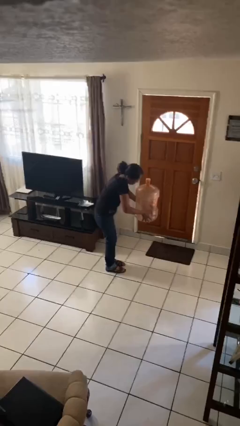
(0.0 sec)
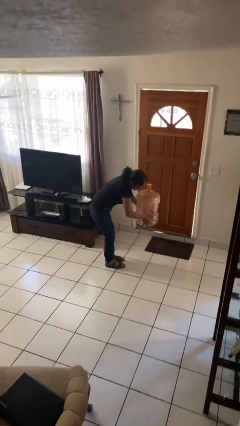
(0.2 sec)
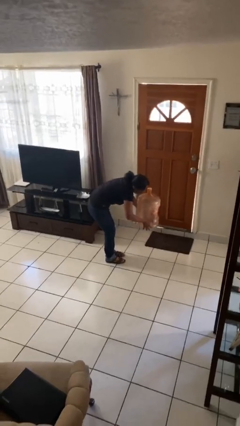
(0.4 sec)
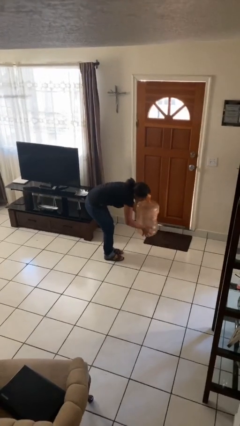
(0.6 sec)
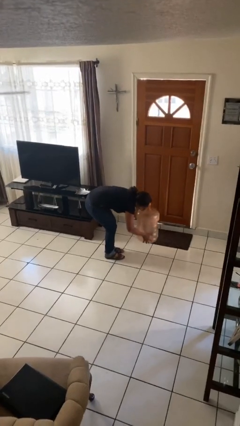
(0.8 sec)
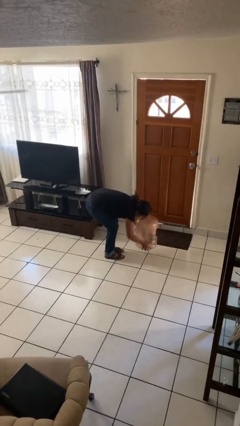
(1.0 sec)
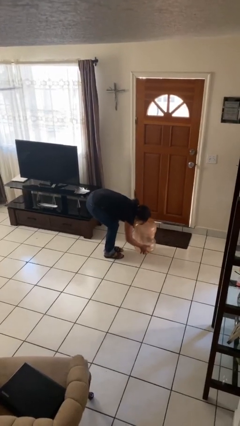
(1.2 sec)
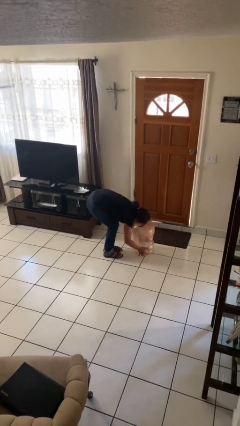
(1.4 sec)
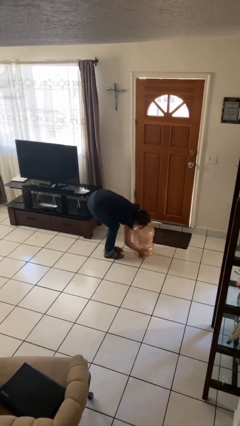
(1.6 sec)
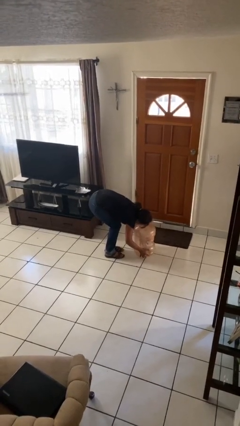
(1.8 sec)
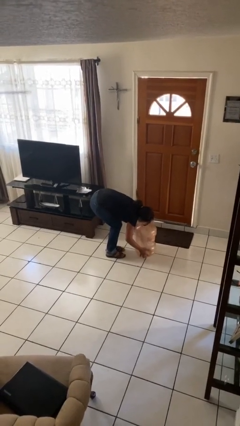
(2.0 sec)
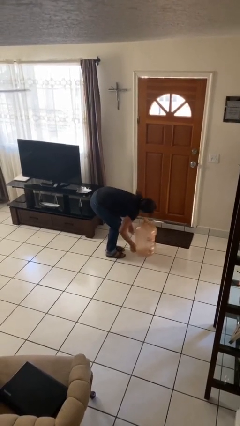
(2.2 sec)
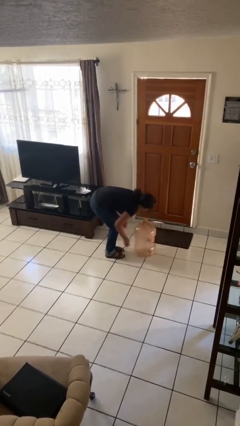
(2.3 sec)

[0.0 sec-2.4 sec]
person puts down object on floor

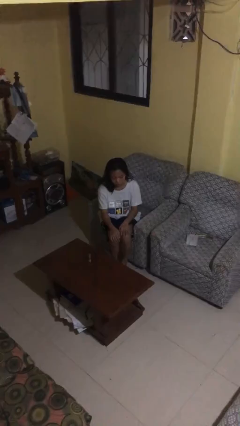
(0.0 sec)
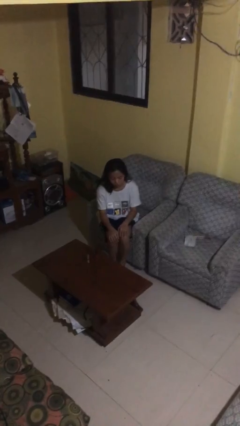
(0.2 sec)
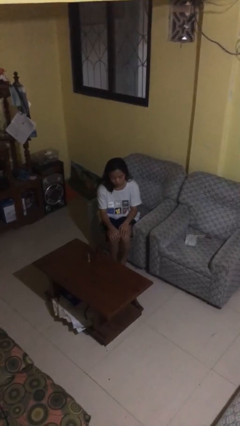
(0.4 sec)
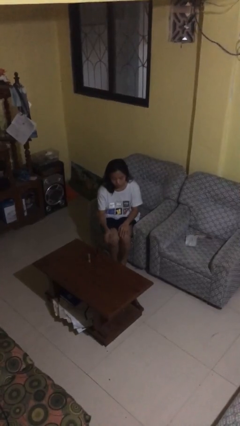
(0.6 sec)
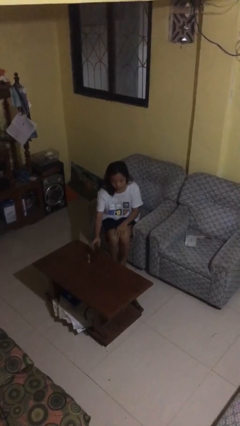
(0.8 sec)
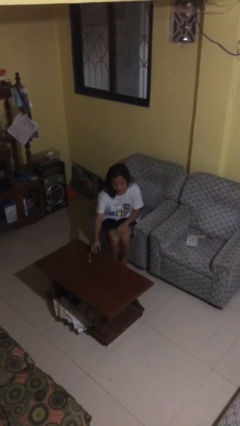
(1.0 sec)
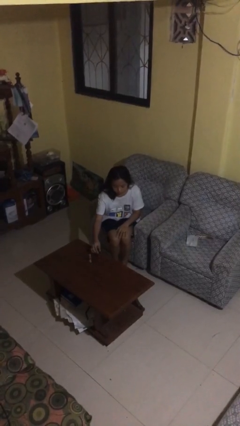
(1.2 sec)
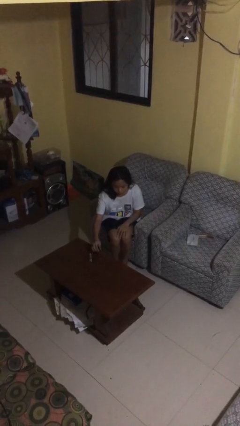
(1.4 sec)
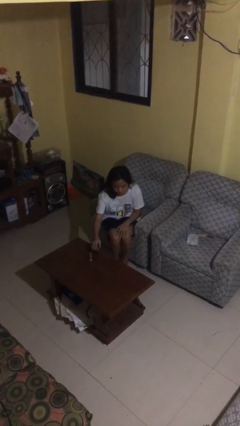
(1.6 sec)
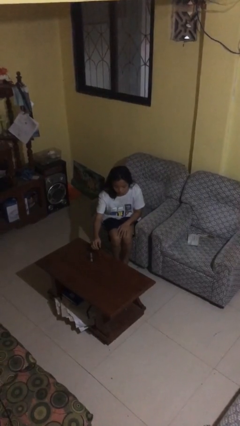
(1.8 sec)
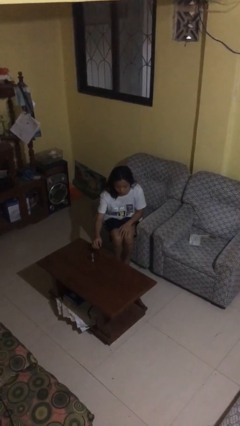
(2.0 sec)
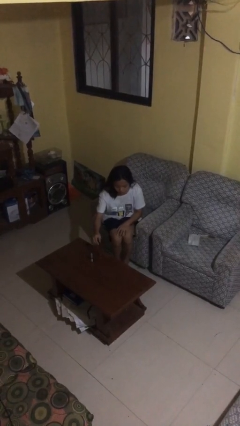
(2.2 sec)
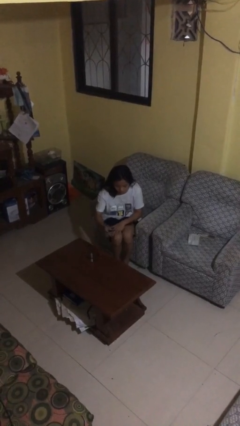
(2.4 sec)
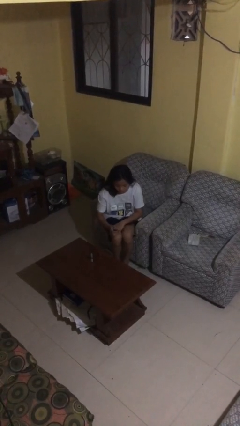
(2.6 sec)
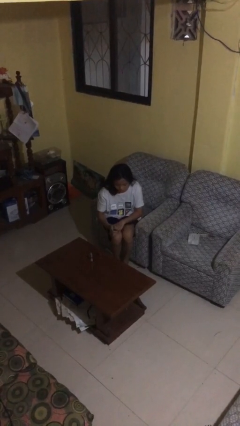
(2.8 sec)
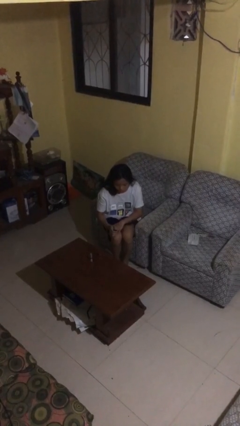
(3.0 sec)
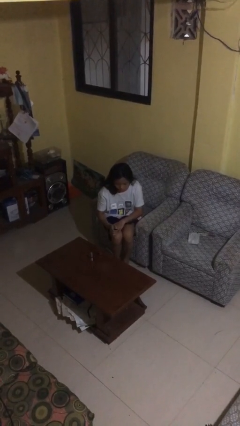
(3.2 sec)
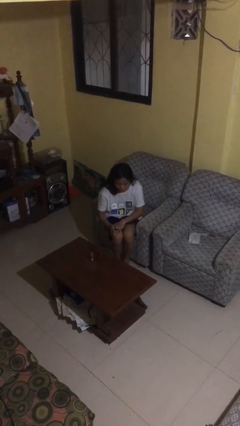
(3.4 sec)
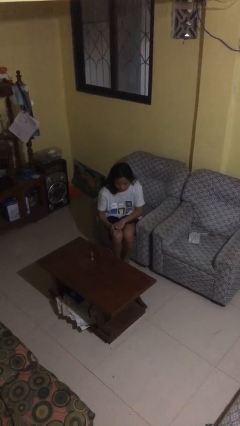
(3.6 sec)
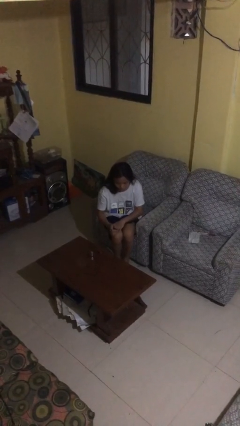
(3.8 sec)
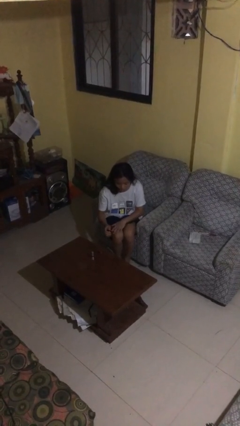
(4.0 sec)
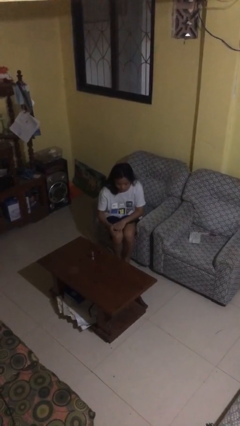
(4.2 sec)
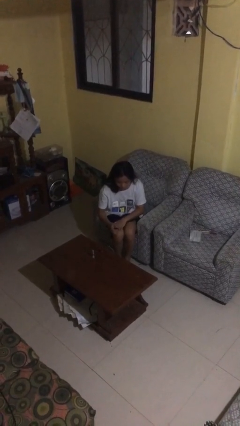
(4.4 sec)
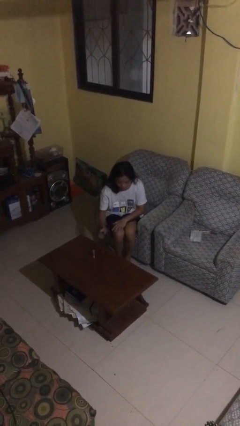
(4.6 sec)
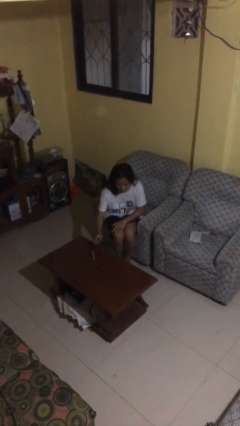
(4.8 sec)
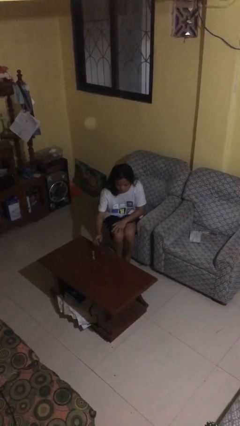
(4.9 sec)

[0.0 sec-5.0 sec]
person paints fingernails

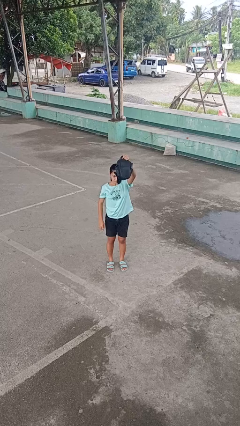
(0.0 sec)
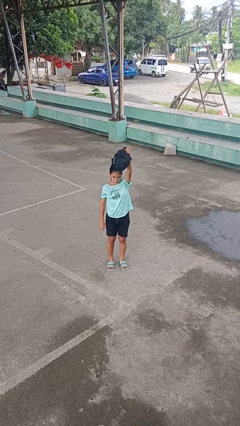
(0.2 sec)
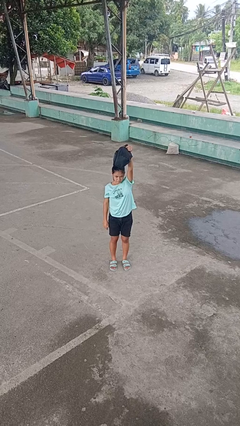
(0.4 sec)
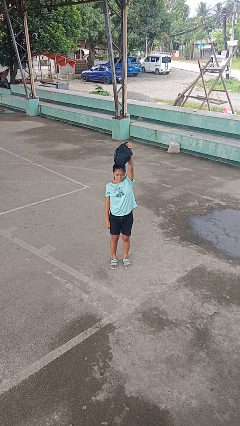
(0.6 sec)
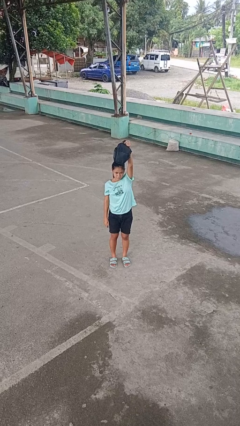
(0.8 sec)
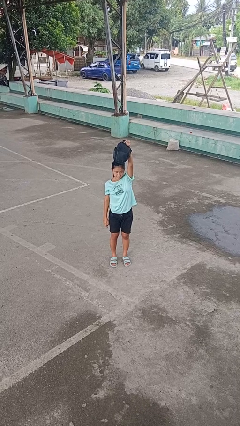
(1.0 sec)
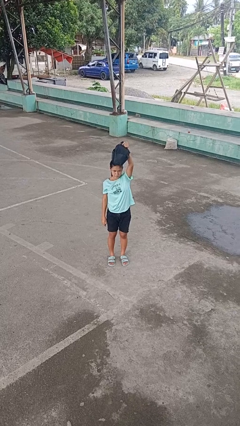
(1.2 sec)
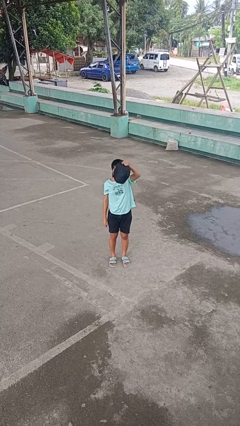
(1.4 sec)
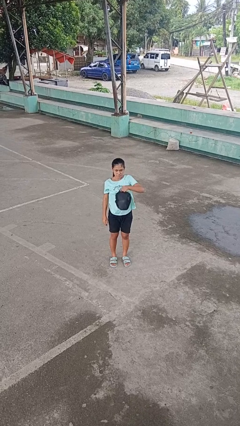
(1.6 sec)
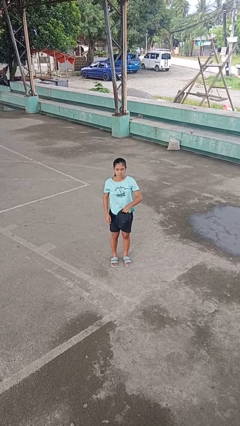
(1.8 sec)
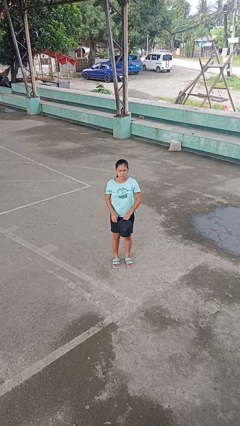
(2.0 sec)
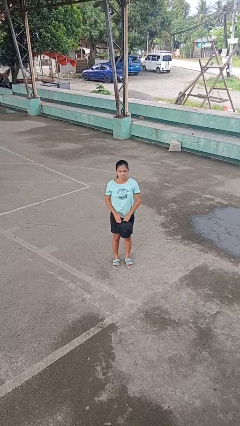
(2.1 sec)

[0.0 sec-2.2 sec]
person holds object above head

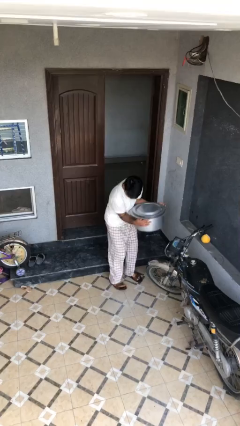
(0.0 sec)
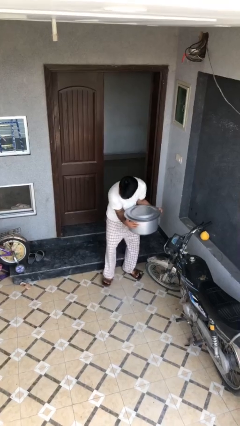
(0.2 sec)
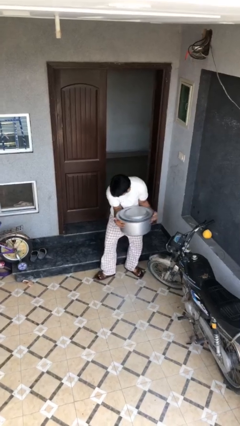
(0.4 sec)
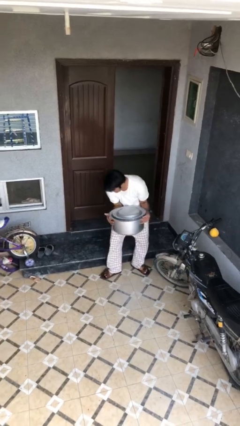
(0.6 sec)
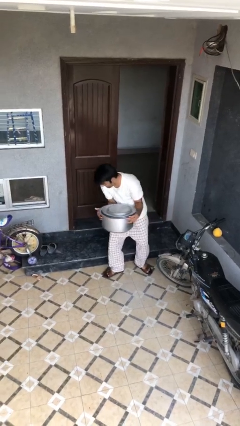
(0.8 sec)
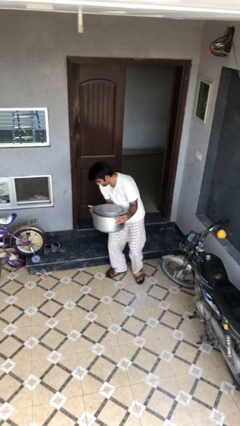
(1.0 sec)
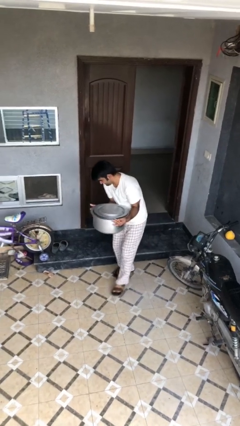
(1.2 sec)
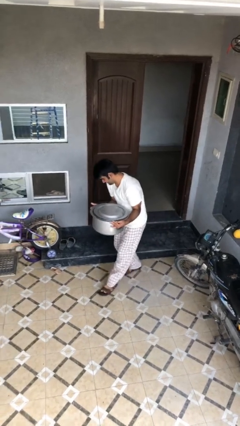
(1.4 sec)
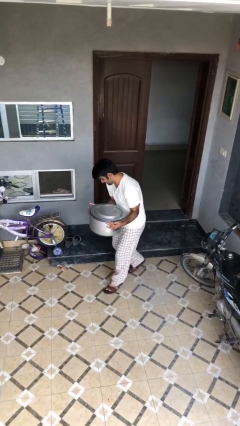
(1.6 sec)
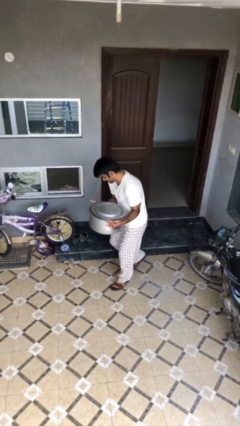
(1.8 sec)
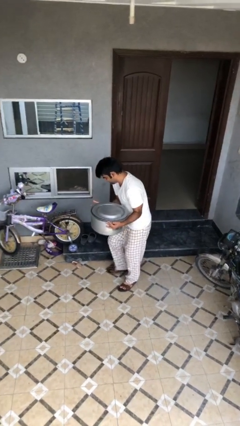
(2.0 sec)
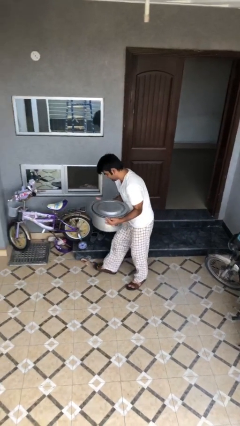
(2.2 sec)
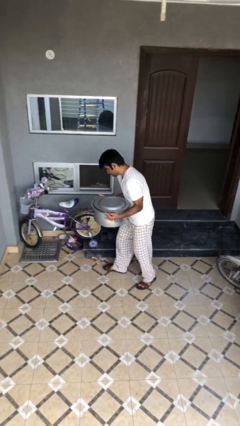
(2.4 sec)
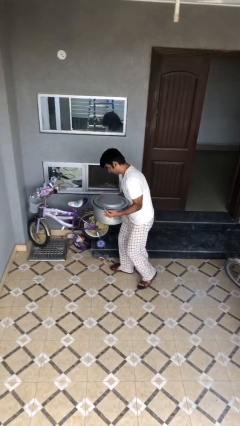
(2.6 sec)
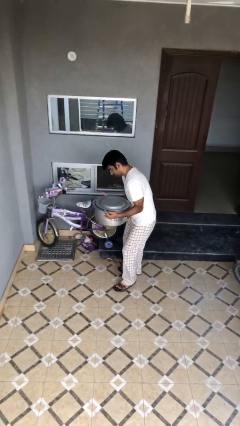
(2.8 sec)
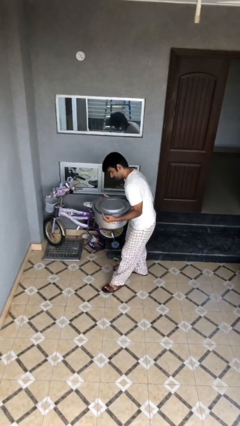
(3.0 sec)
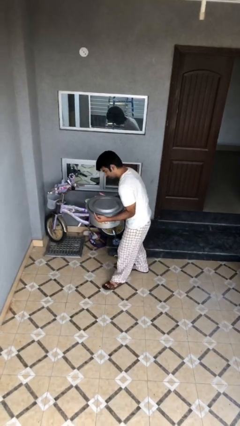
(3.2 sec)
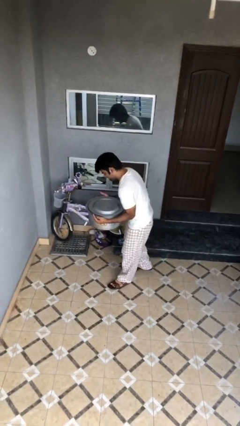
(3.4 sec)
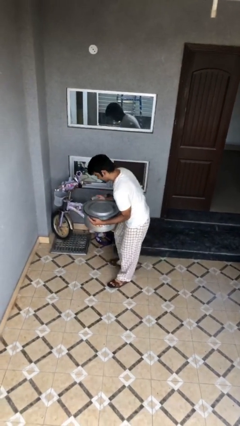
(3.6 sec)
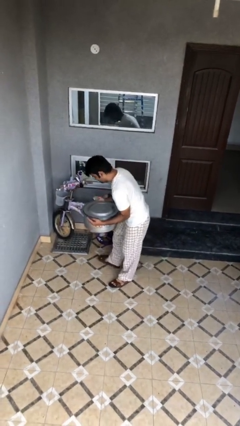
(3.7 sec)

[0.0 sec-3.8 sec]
person carries heavy object

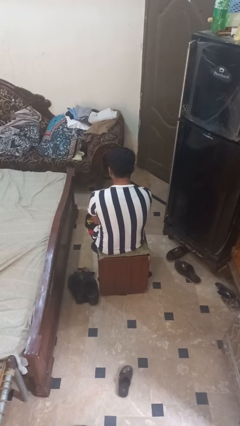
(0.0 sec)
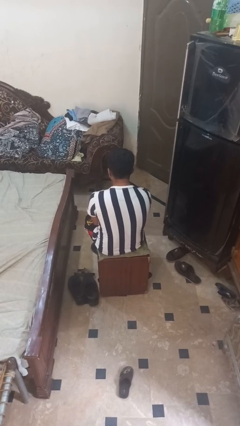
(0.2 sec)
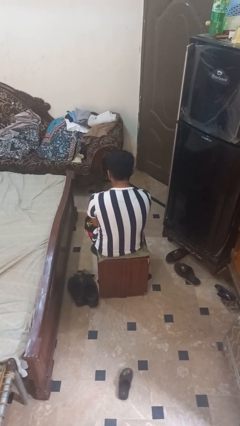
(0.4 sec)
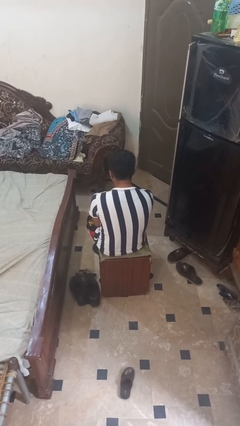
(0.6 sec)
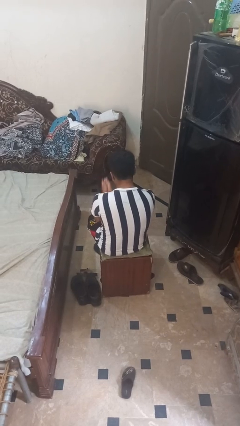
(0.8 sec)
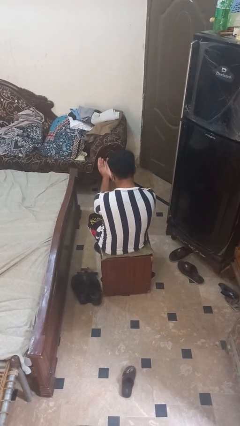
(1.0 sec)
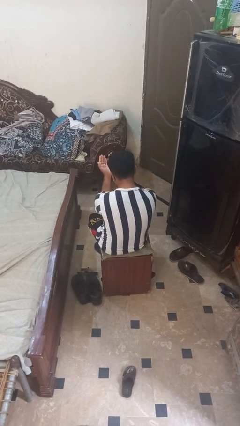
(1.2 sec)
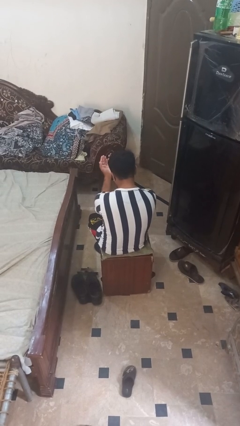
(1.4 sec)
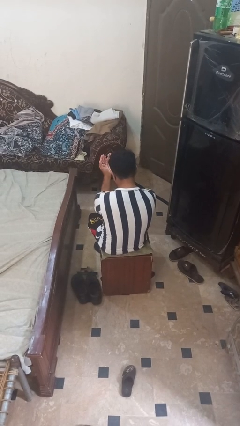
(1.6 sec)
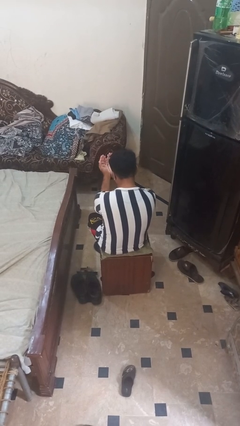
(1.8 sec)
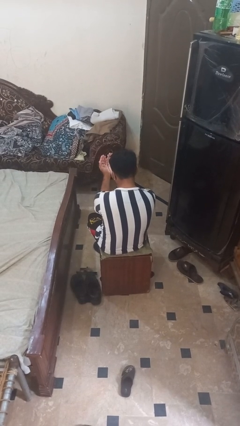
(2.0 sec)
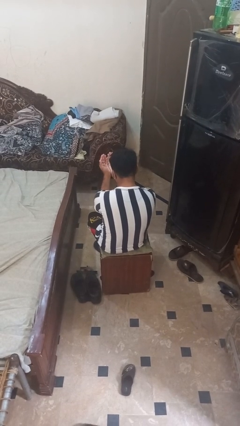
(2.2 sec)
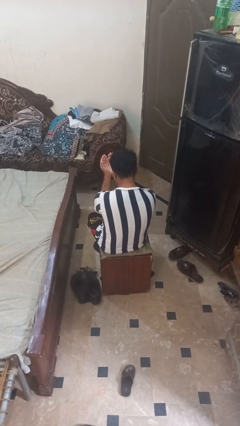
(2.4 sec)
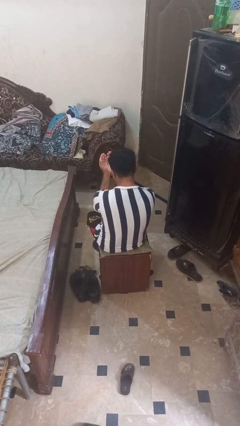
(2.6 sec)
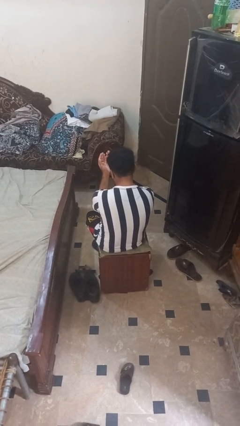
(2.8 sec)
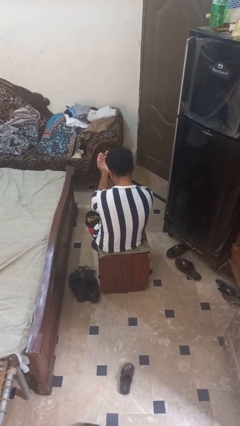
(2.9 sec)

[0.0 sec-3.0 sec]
person prays

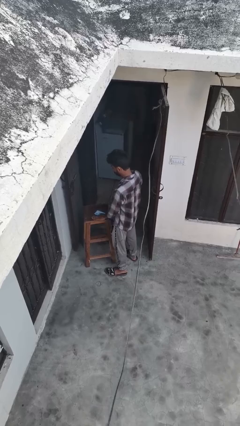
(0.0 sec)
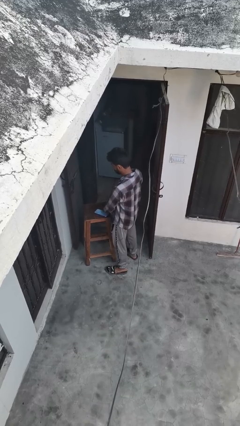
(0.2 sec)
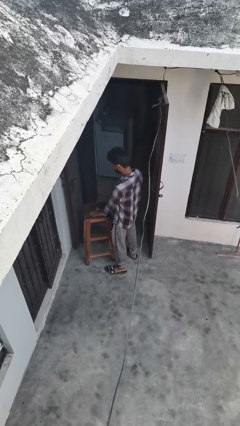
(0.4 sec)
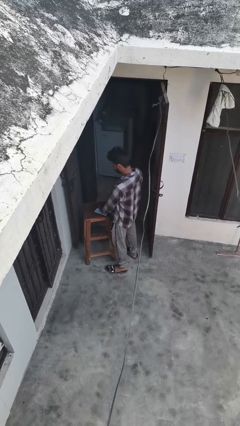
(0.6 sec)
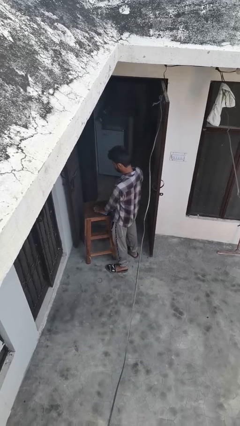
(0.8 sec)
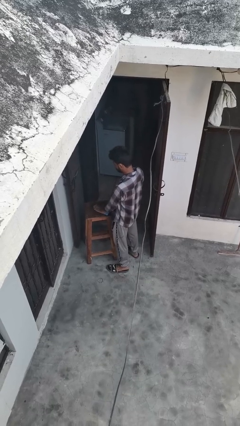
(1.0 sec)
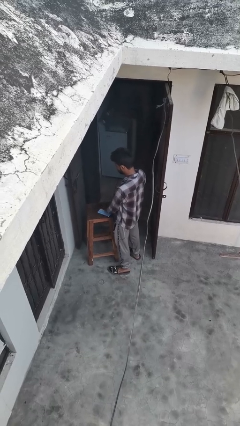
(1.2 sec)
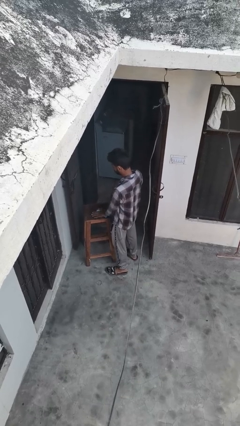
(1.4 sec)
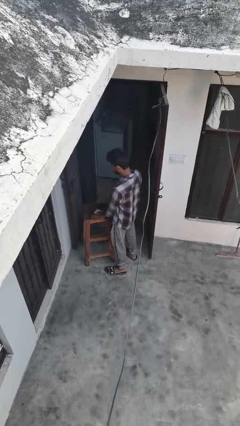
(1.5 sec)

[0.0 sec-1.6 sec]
person waves hand over object
